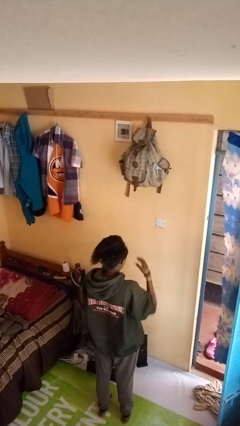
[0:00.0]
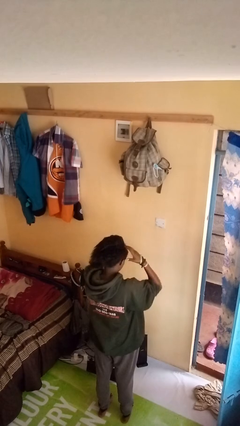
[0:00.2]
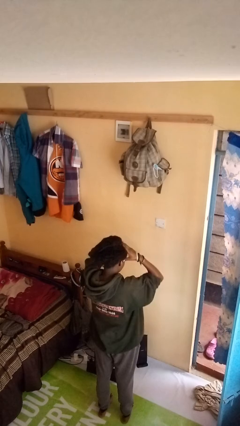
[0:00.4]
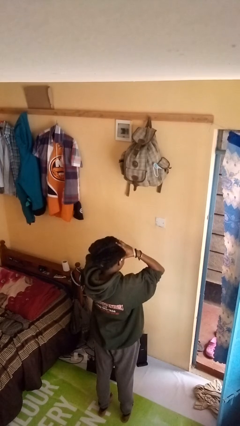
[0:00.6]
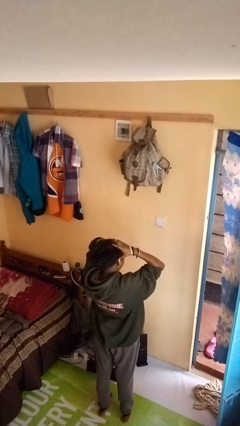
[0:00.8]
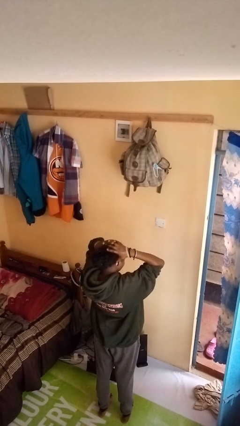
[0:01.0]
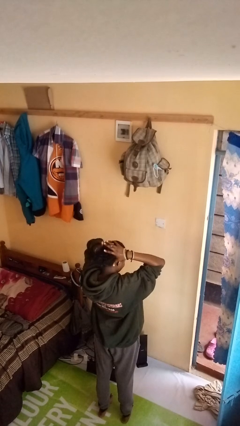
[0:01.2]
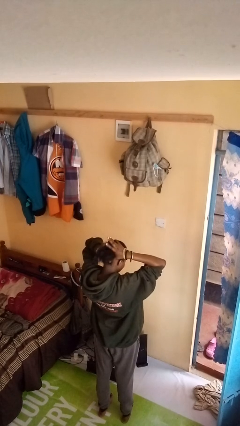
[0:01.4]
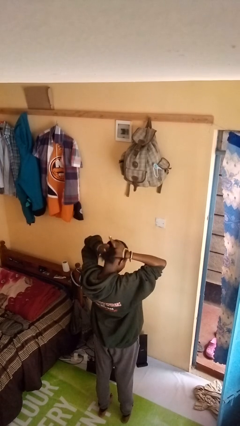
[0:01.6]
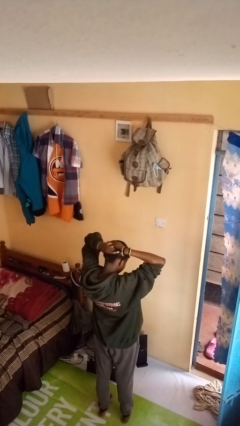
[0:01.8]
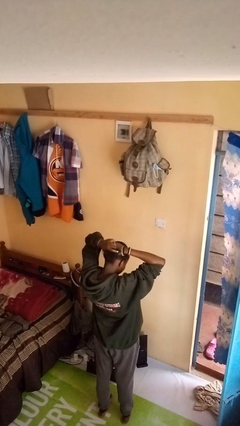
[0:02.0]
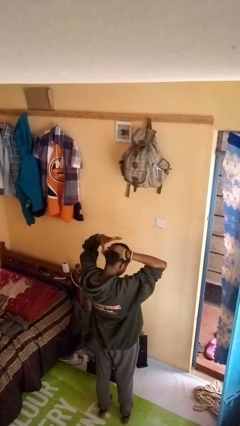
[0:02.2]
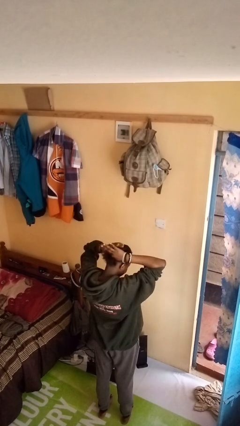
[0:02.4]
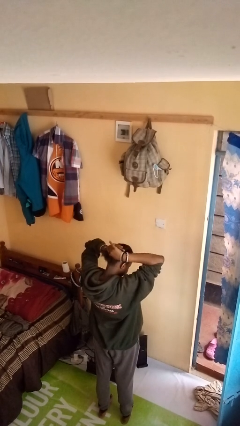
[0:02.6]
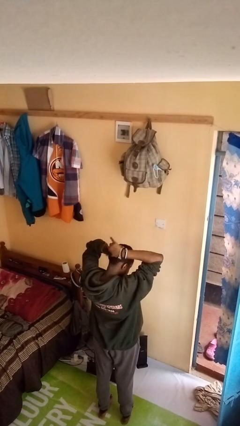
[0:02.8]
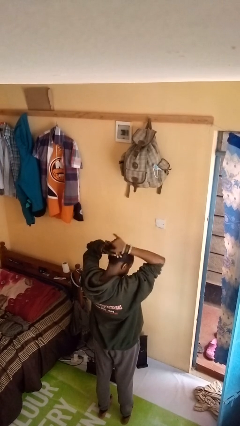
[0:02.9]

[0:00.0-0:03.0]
person strokes hair

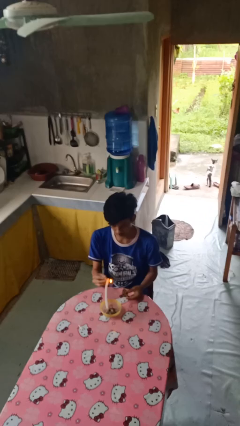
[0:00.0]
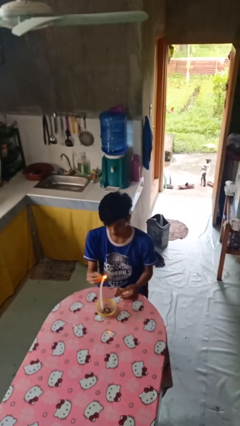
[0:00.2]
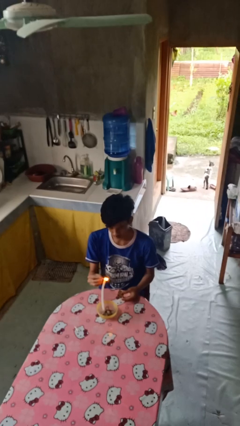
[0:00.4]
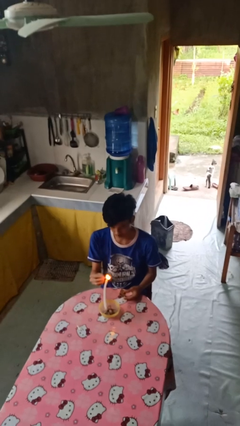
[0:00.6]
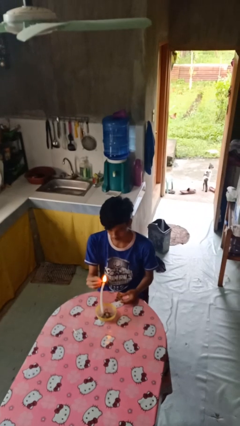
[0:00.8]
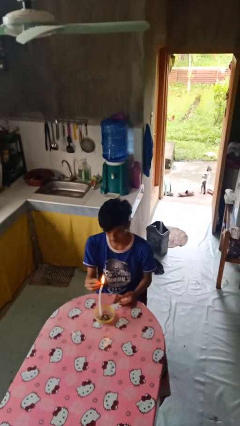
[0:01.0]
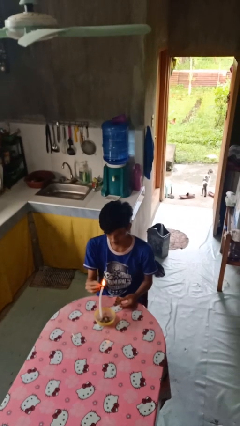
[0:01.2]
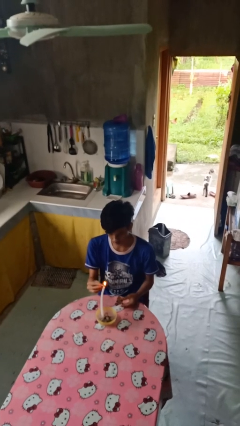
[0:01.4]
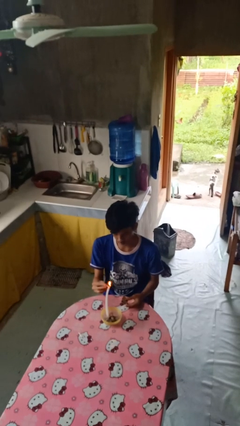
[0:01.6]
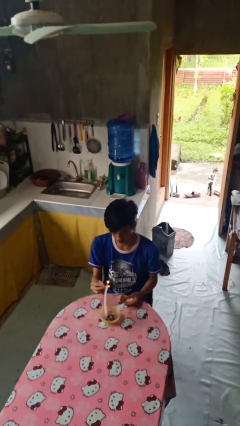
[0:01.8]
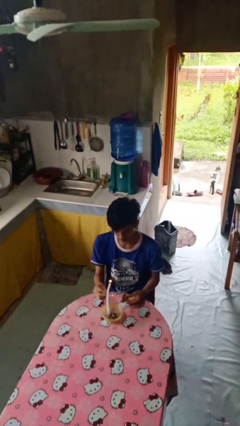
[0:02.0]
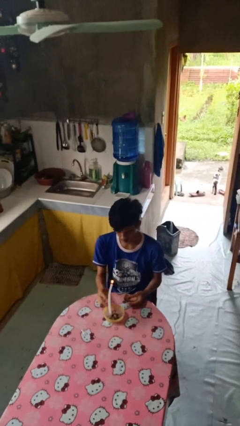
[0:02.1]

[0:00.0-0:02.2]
person lights candle

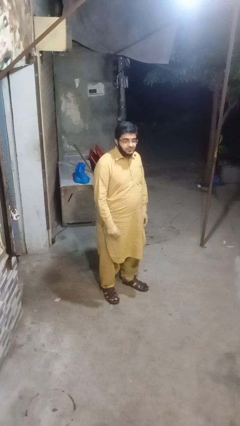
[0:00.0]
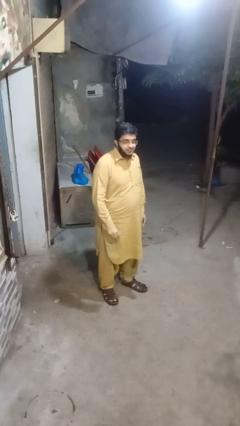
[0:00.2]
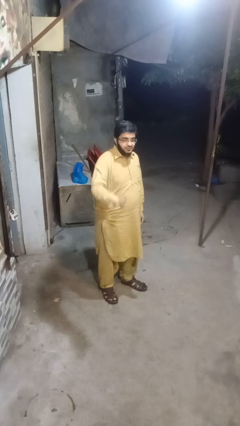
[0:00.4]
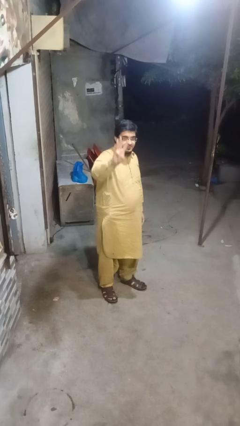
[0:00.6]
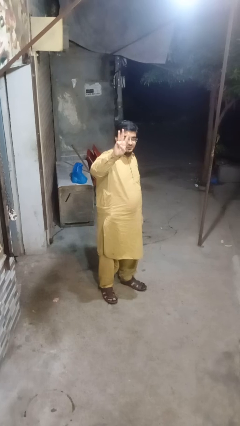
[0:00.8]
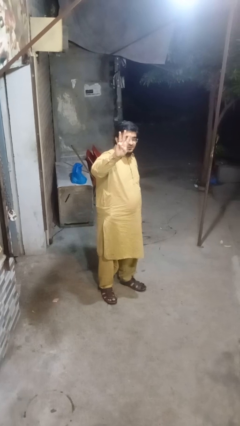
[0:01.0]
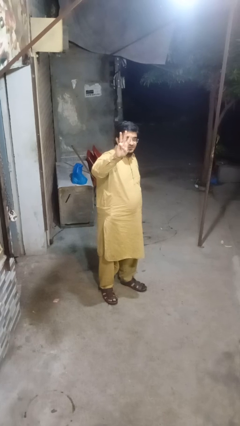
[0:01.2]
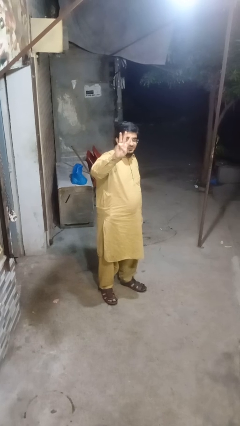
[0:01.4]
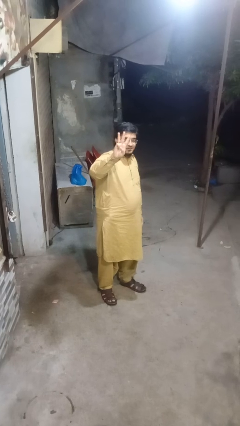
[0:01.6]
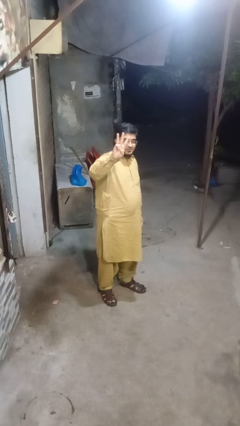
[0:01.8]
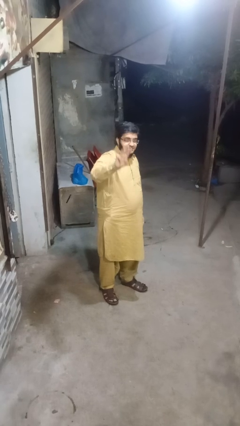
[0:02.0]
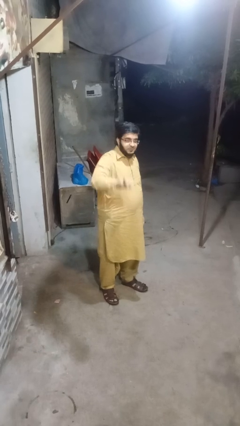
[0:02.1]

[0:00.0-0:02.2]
person gestures number three

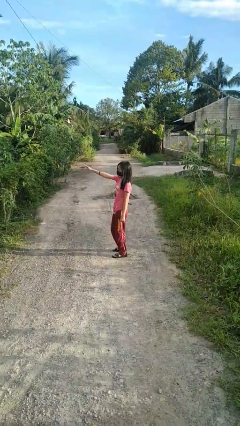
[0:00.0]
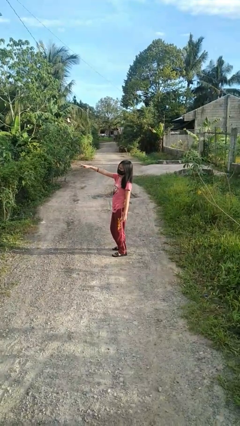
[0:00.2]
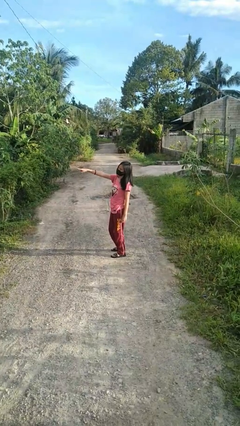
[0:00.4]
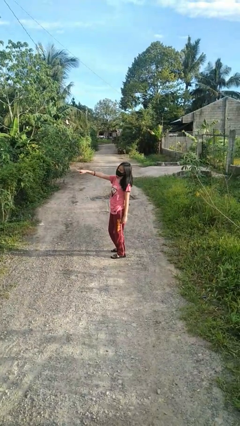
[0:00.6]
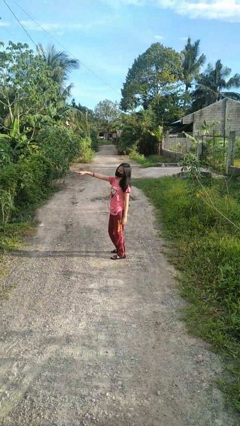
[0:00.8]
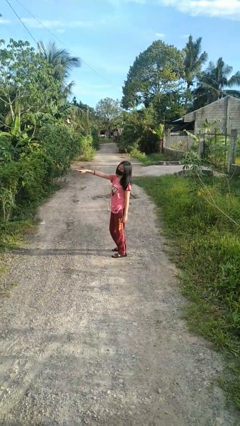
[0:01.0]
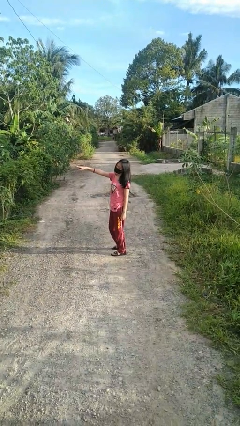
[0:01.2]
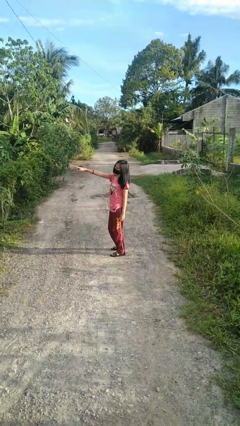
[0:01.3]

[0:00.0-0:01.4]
person points at person

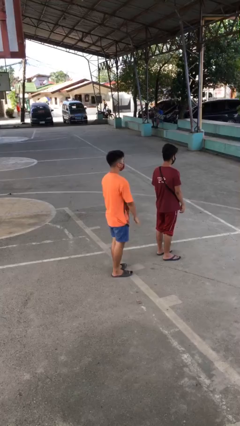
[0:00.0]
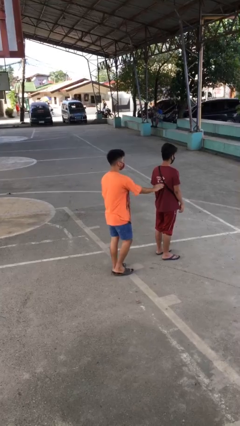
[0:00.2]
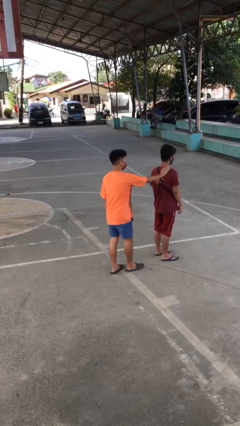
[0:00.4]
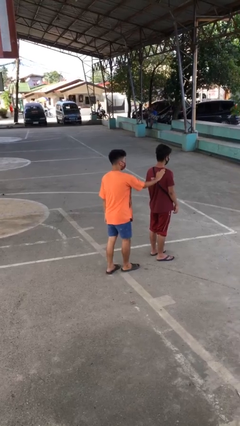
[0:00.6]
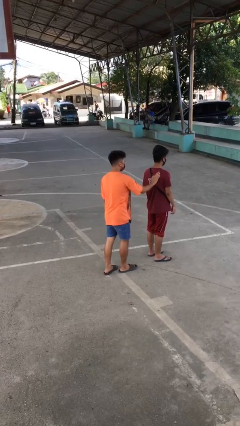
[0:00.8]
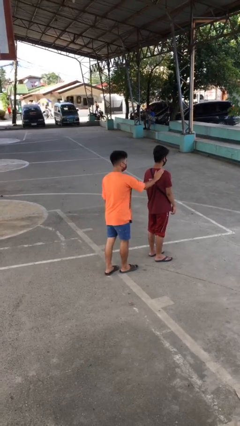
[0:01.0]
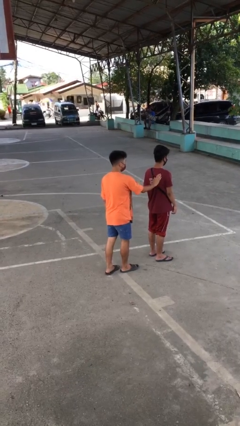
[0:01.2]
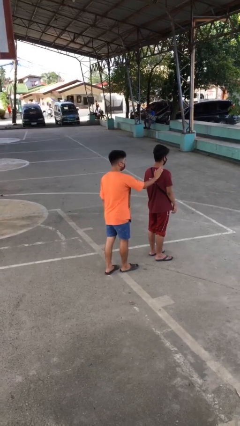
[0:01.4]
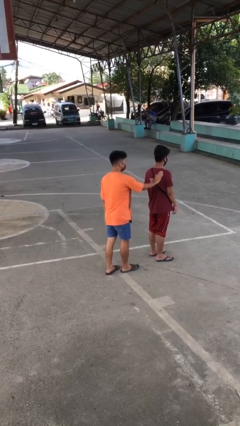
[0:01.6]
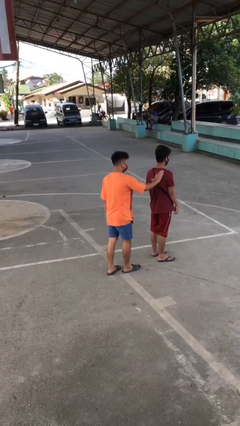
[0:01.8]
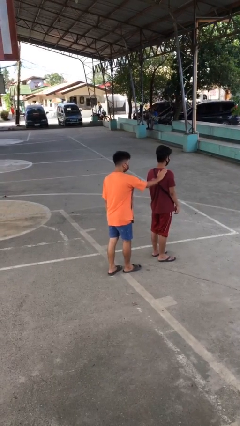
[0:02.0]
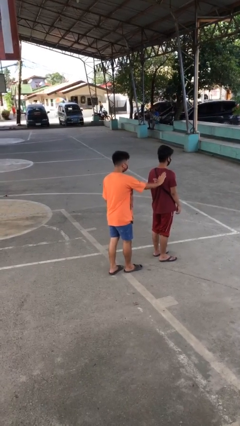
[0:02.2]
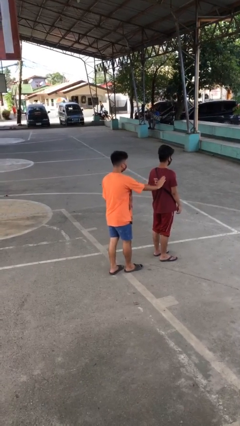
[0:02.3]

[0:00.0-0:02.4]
person touches back of person

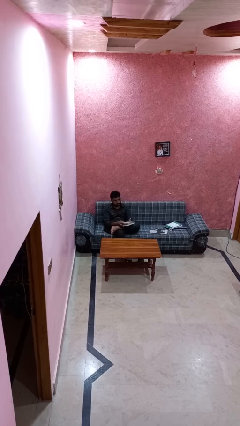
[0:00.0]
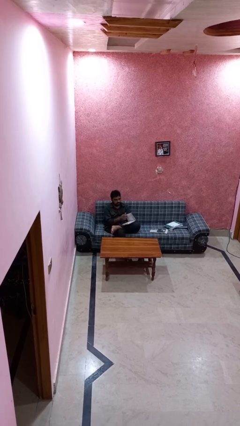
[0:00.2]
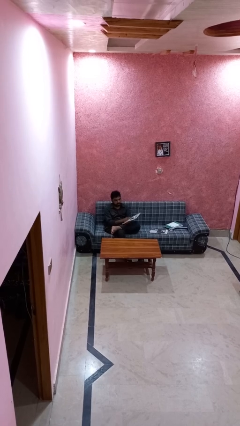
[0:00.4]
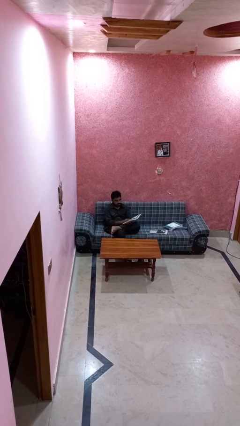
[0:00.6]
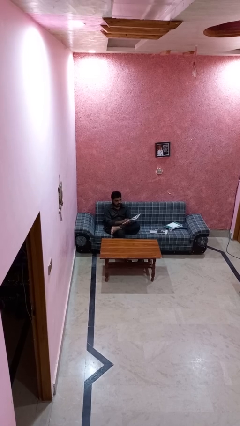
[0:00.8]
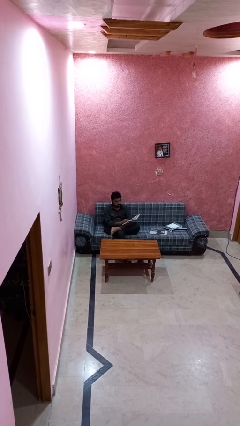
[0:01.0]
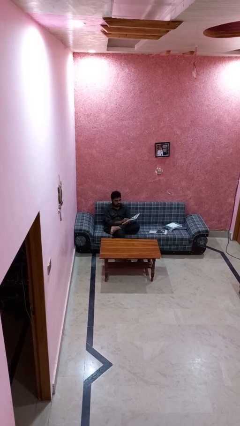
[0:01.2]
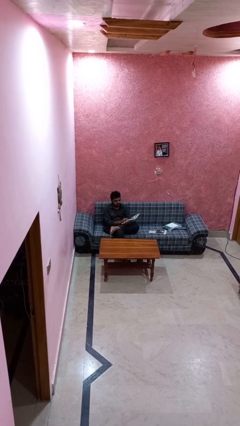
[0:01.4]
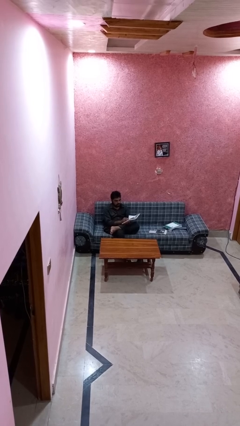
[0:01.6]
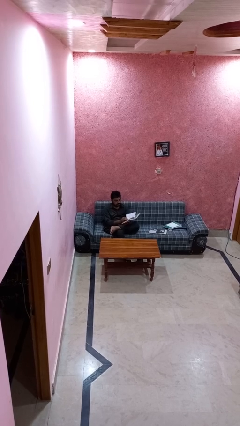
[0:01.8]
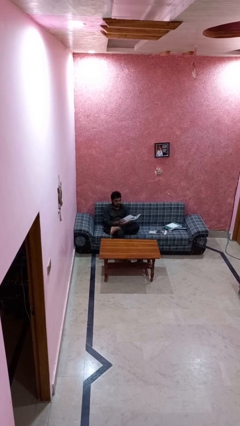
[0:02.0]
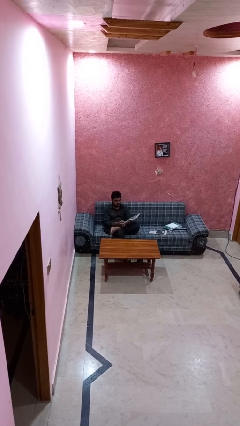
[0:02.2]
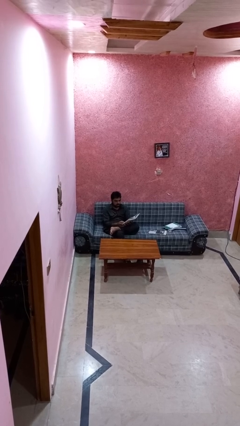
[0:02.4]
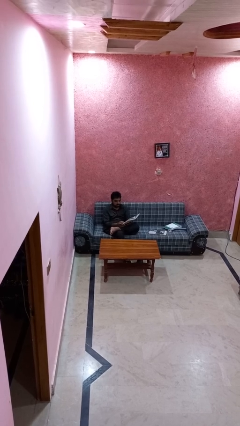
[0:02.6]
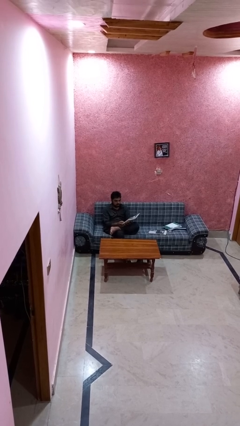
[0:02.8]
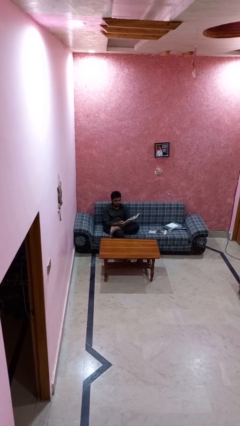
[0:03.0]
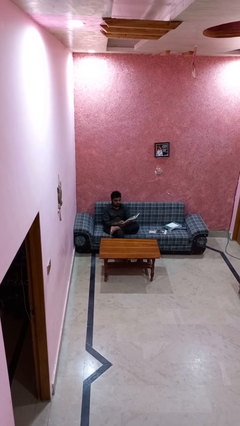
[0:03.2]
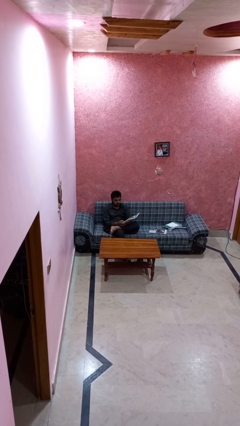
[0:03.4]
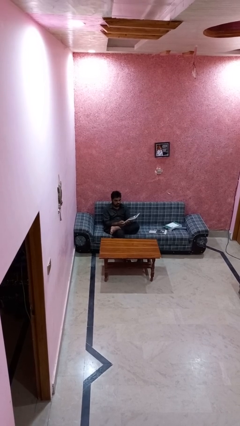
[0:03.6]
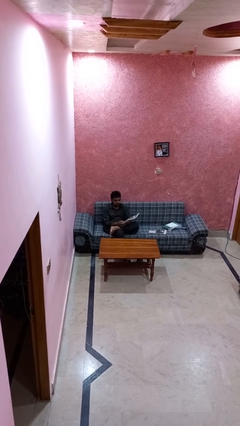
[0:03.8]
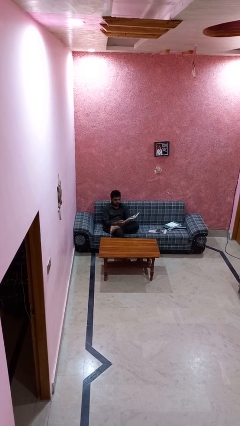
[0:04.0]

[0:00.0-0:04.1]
person reads book

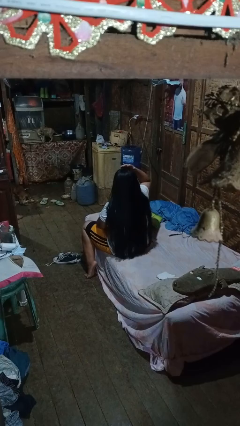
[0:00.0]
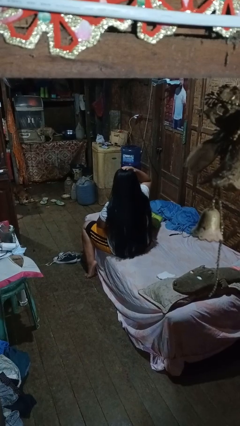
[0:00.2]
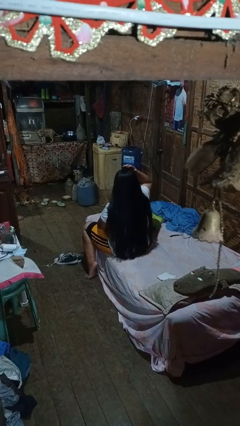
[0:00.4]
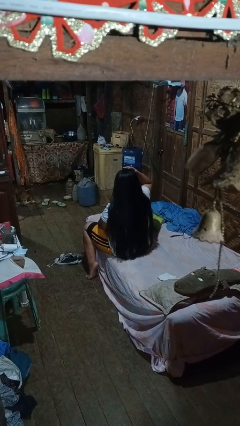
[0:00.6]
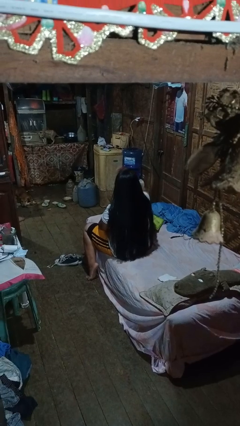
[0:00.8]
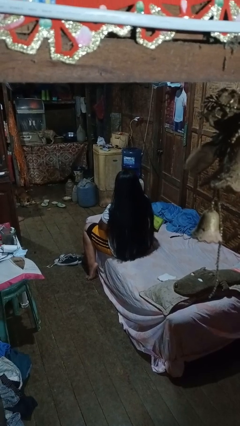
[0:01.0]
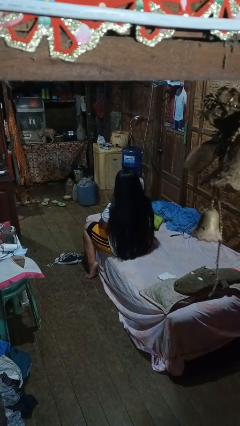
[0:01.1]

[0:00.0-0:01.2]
person pats head

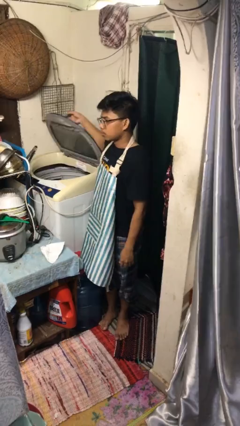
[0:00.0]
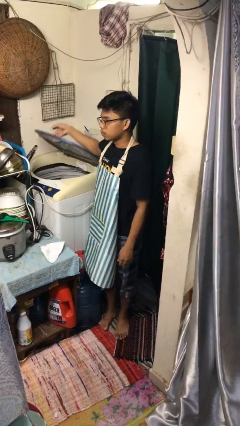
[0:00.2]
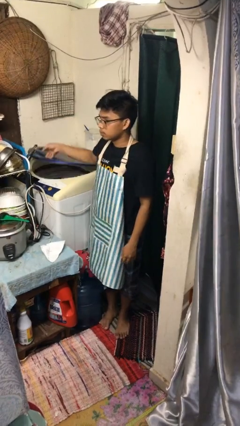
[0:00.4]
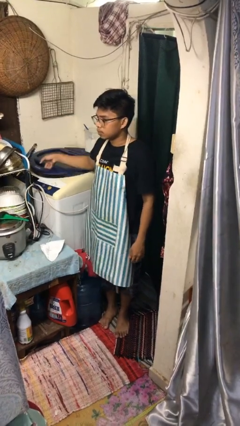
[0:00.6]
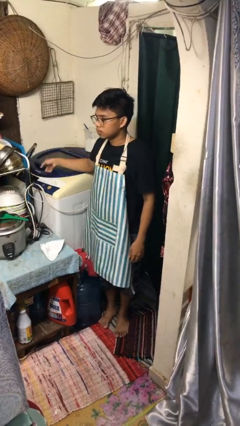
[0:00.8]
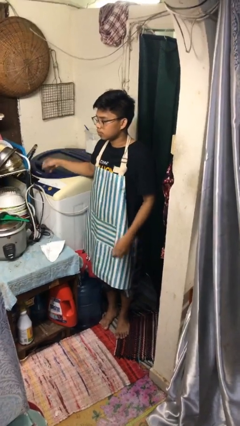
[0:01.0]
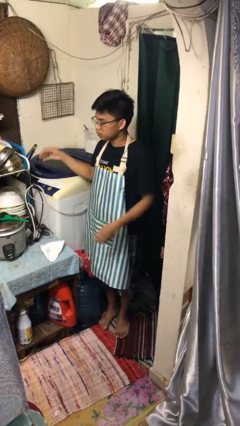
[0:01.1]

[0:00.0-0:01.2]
person closes clothes washer
